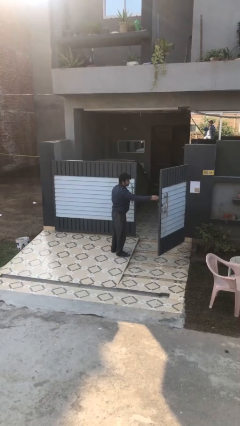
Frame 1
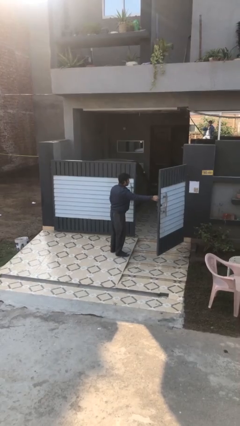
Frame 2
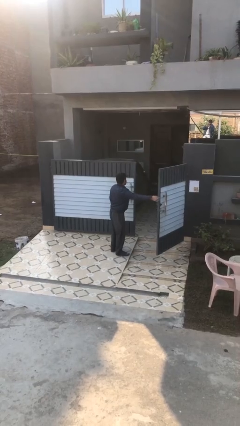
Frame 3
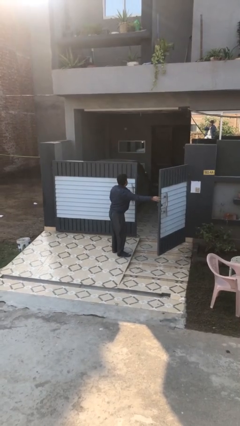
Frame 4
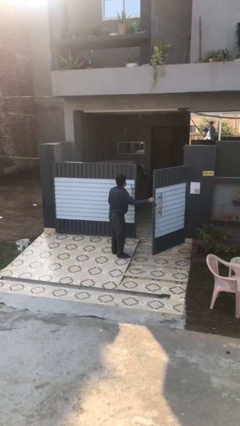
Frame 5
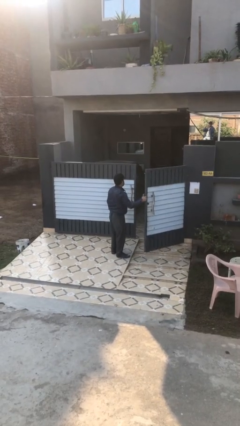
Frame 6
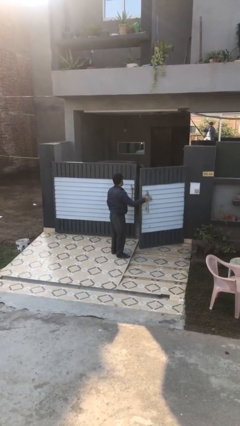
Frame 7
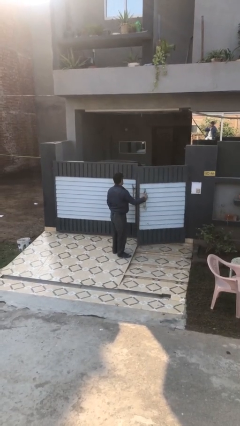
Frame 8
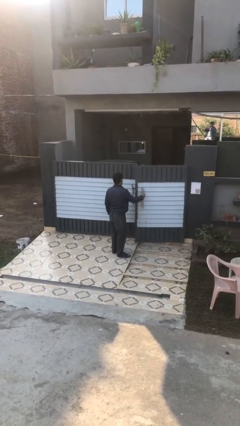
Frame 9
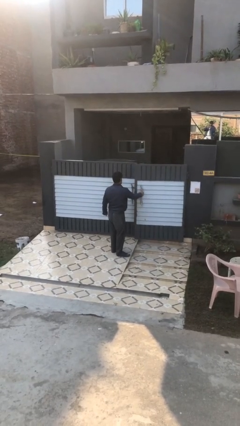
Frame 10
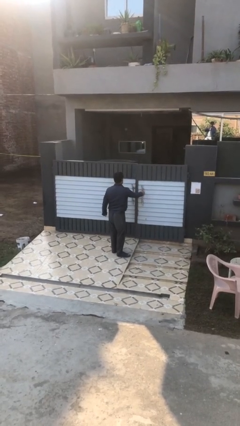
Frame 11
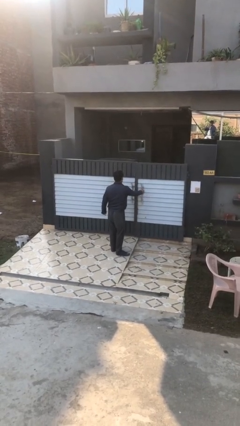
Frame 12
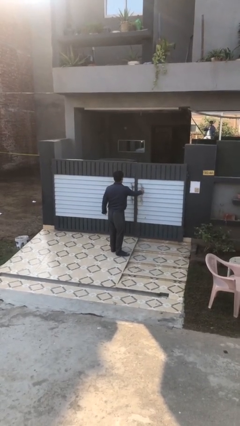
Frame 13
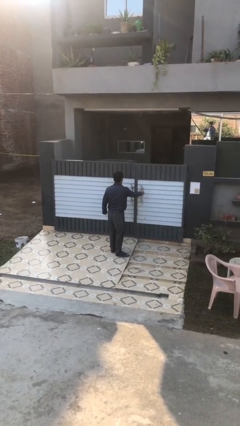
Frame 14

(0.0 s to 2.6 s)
person closes facility door

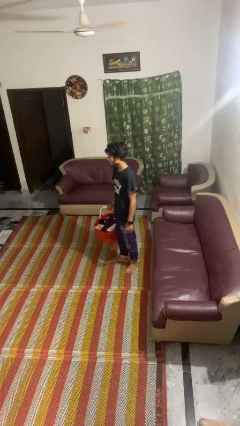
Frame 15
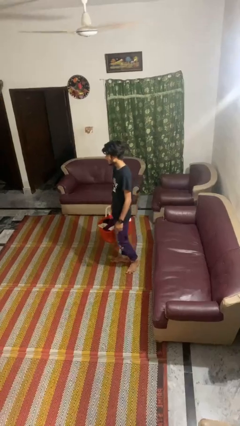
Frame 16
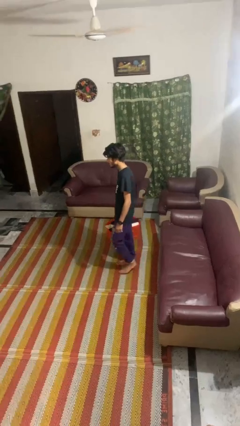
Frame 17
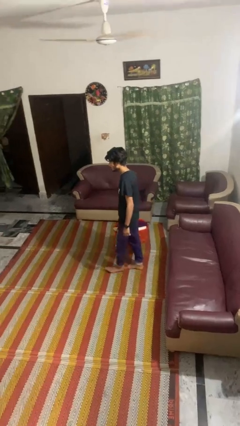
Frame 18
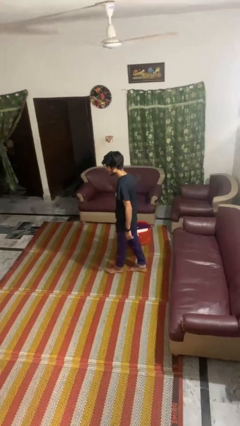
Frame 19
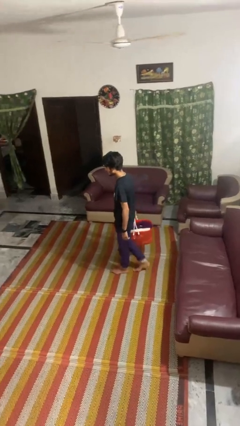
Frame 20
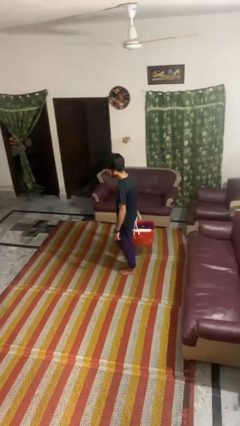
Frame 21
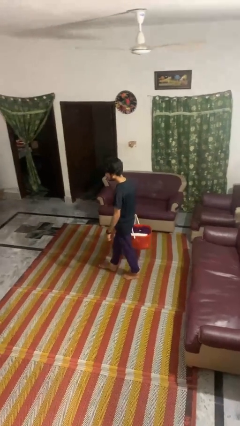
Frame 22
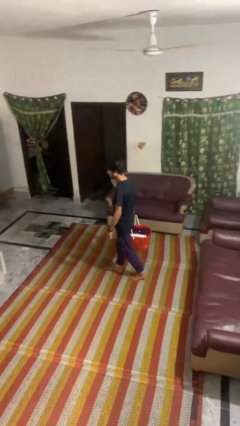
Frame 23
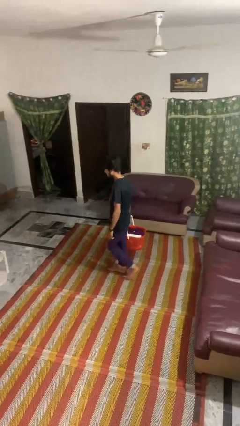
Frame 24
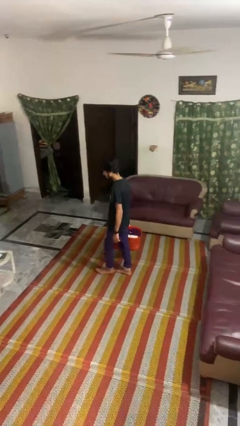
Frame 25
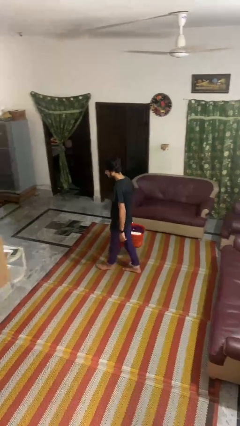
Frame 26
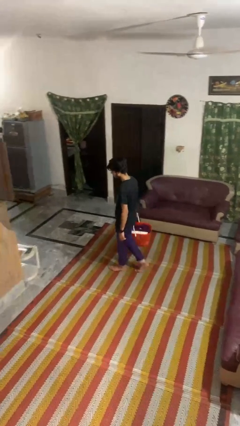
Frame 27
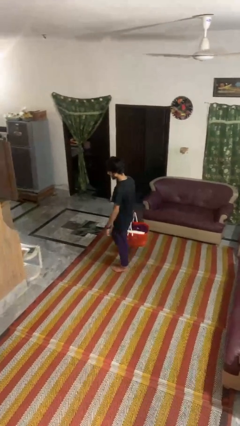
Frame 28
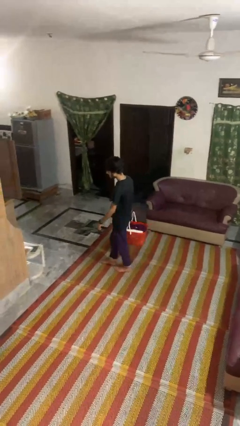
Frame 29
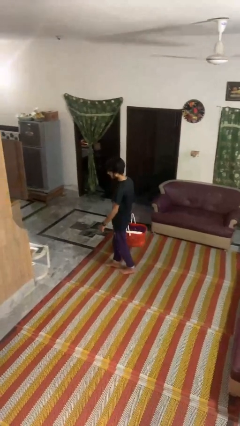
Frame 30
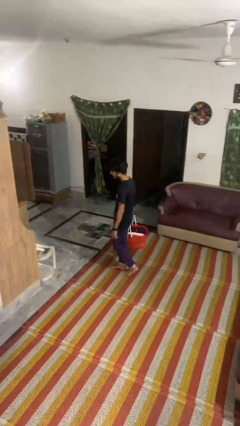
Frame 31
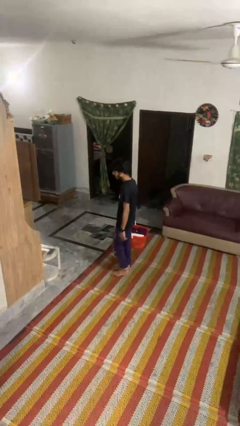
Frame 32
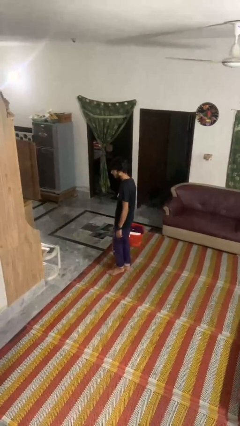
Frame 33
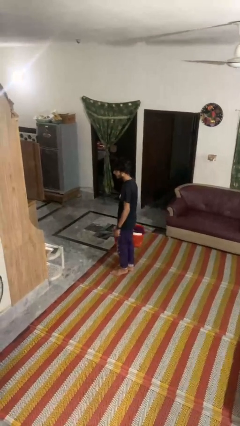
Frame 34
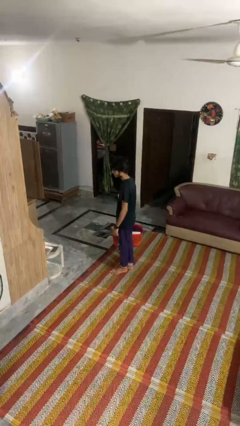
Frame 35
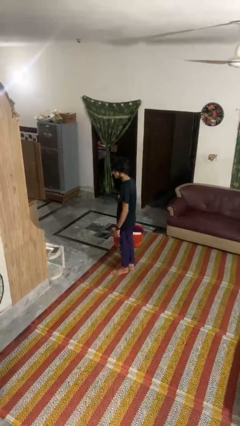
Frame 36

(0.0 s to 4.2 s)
person carries laundry basket

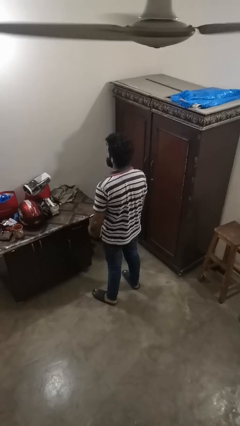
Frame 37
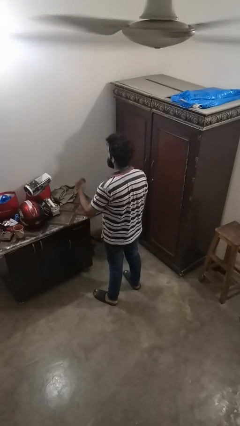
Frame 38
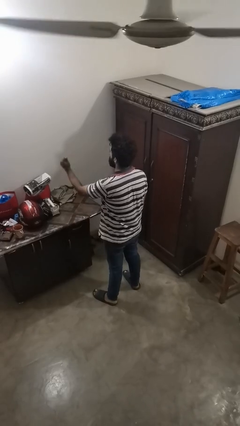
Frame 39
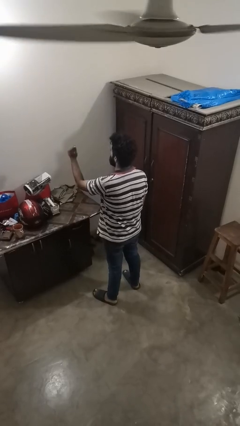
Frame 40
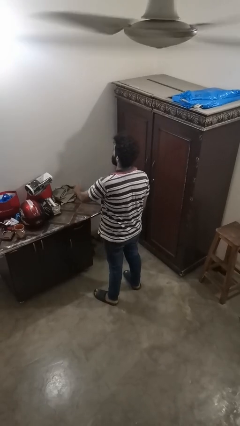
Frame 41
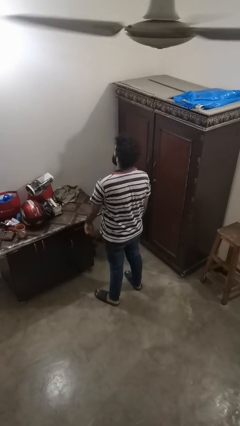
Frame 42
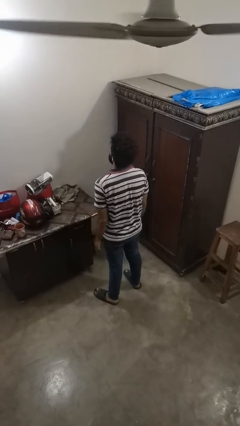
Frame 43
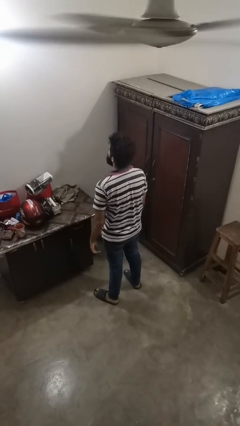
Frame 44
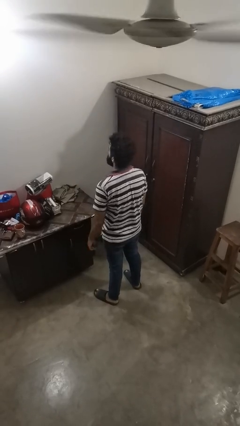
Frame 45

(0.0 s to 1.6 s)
person snaps fingers

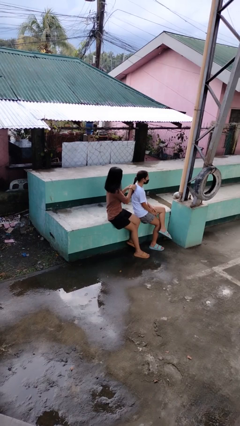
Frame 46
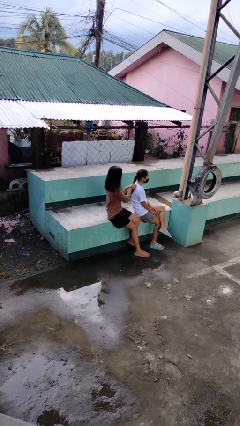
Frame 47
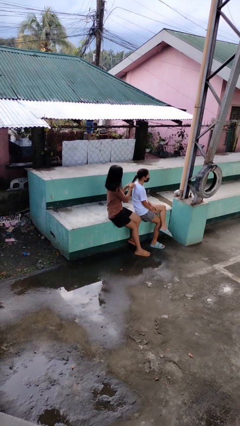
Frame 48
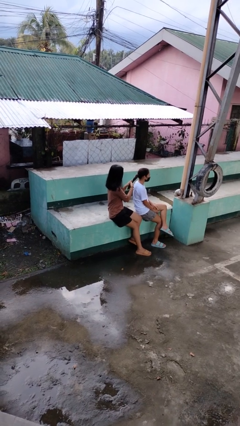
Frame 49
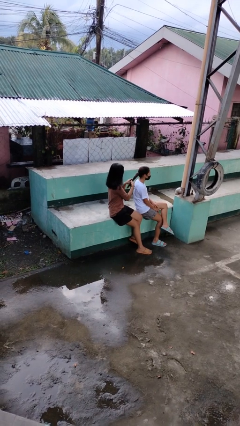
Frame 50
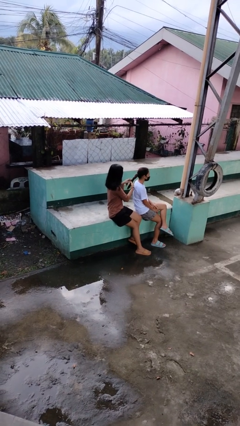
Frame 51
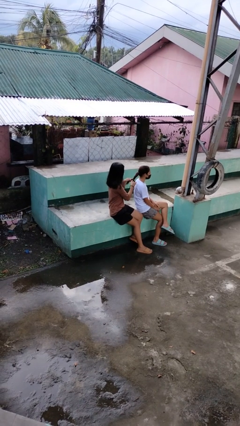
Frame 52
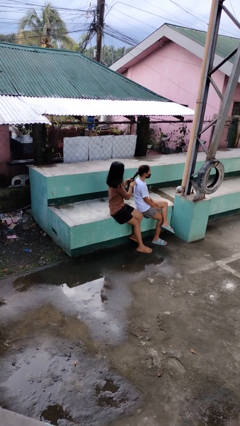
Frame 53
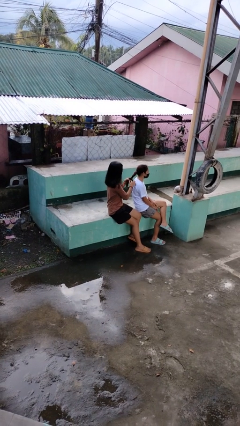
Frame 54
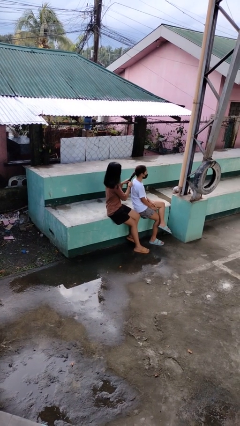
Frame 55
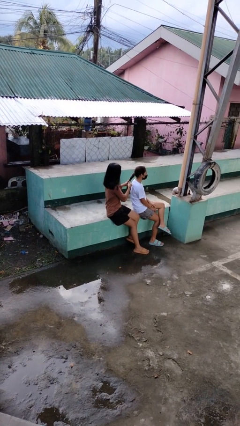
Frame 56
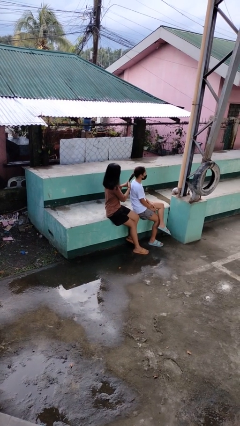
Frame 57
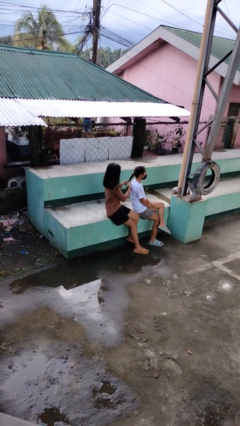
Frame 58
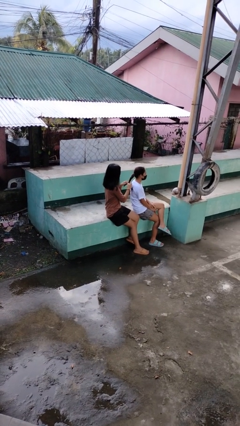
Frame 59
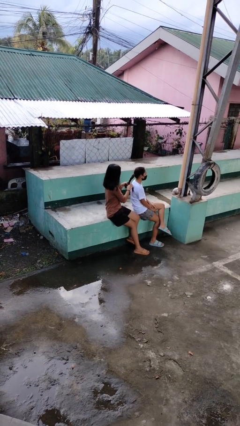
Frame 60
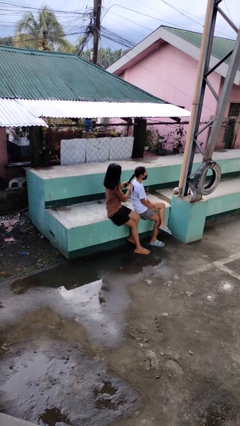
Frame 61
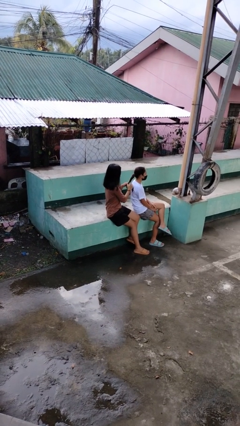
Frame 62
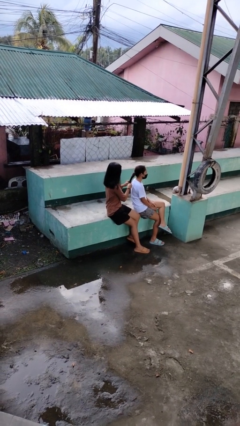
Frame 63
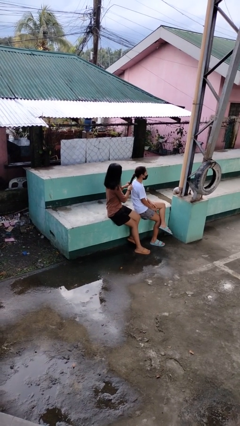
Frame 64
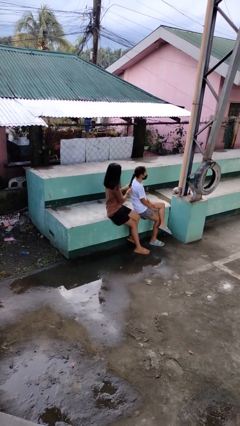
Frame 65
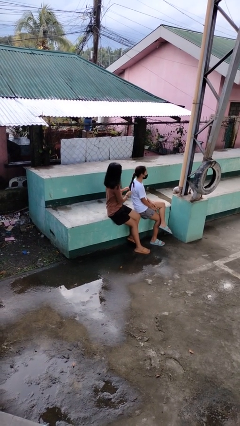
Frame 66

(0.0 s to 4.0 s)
person braids hair of person

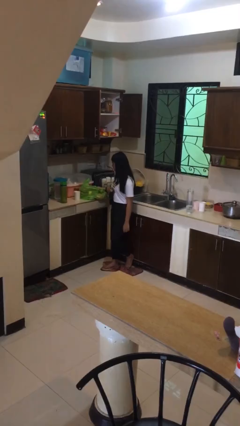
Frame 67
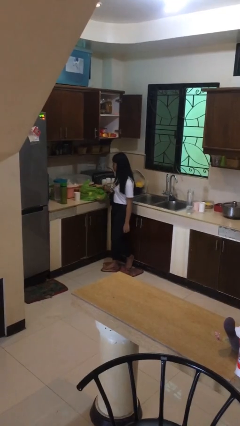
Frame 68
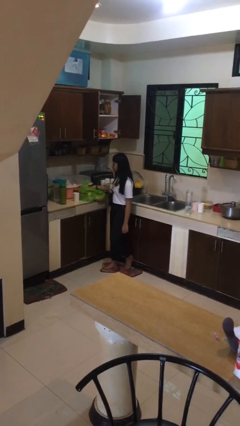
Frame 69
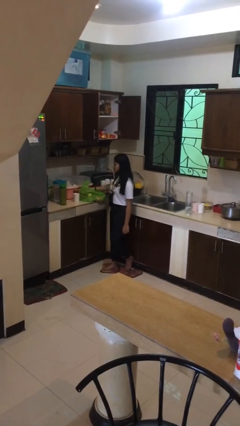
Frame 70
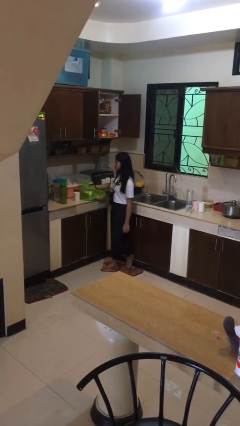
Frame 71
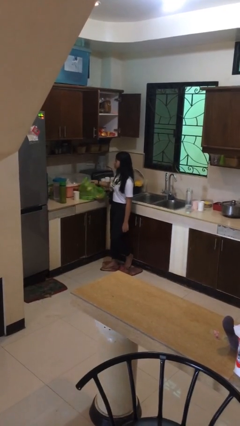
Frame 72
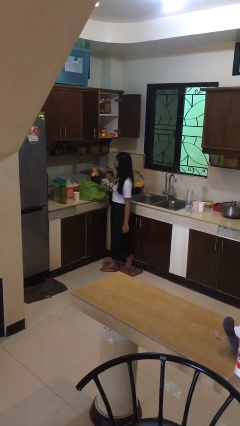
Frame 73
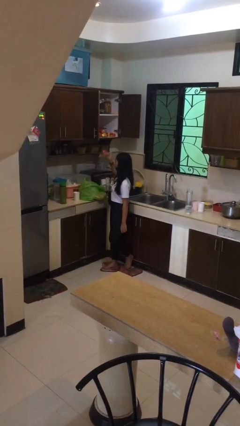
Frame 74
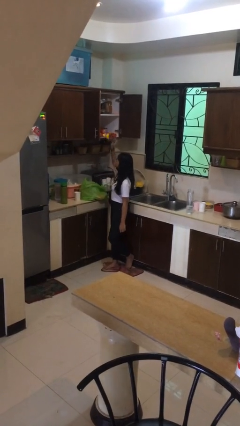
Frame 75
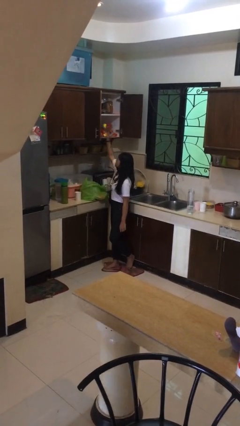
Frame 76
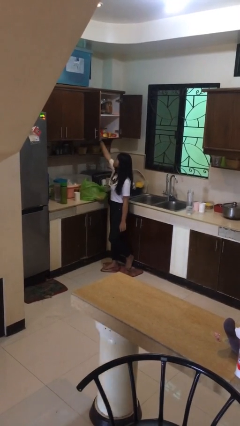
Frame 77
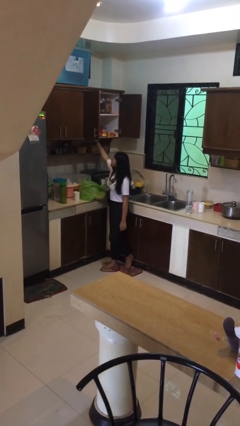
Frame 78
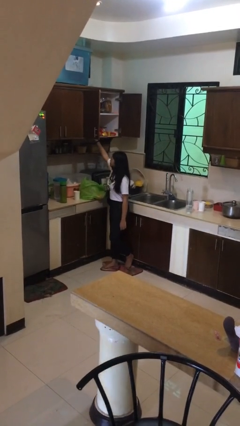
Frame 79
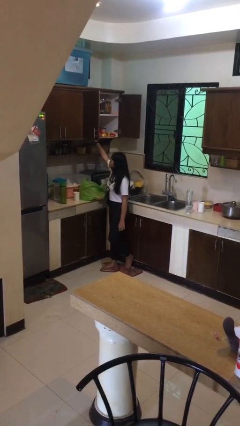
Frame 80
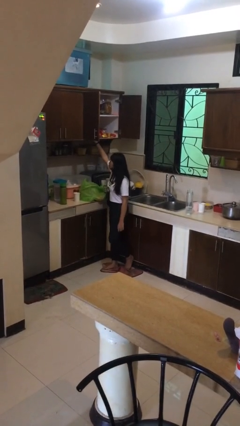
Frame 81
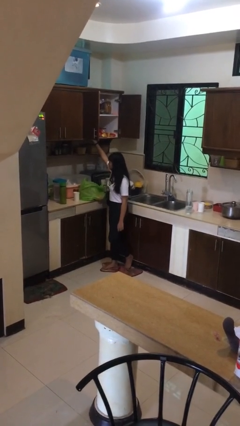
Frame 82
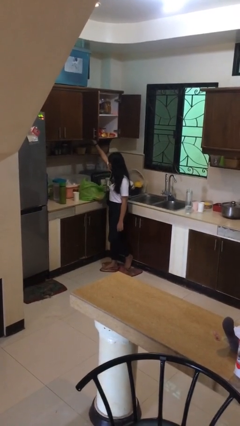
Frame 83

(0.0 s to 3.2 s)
person loads groceries into cabinet

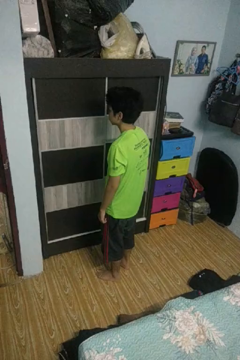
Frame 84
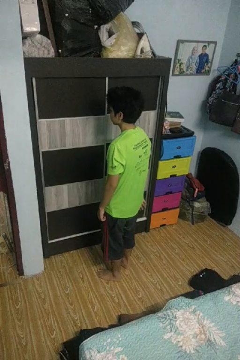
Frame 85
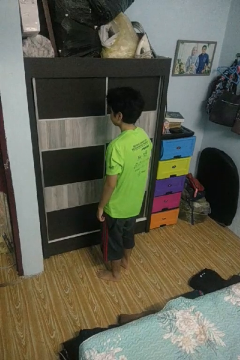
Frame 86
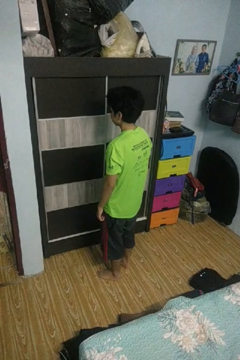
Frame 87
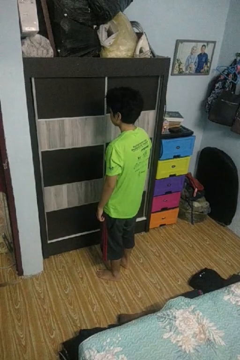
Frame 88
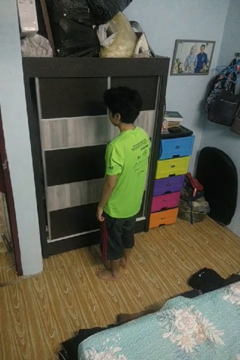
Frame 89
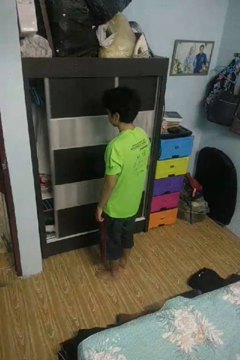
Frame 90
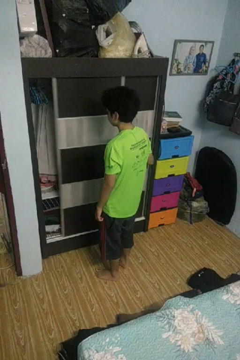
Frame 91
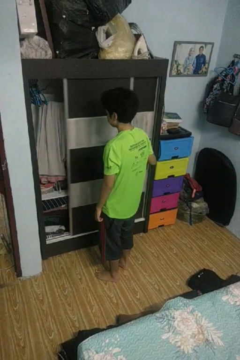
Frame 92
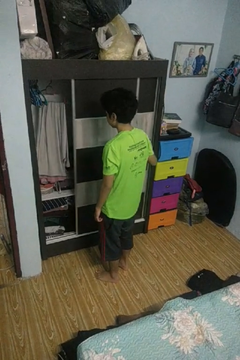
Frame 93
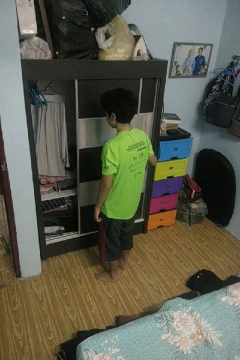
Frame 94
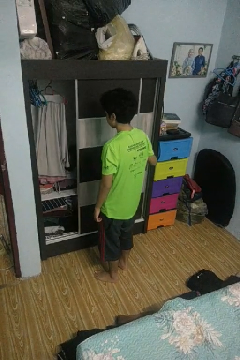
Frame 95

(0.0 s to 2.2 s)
person opens closet door

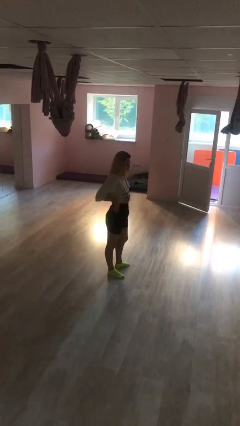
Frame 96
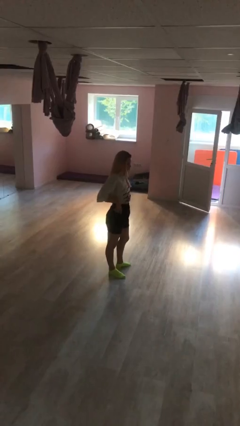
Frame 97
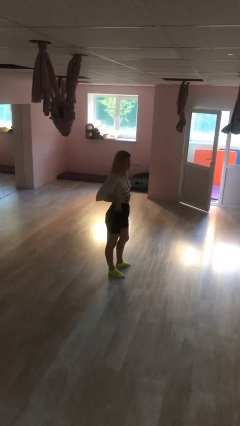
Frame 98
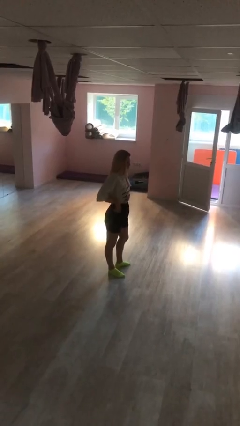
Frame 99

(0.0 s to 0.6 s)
person puts phone into pocket
